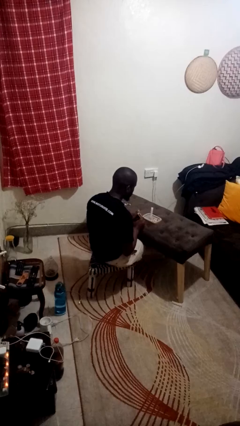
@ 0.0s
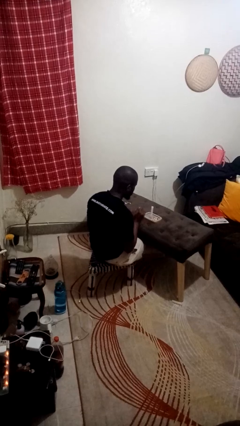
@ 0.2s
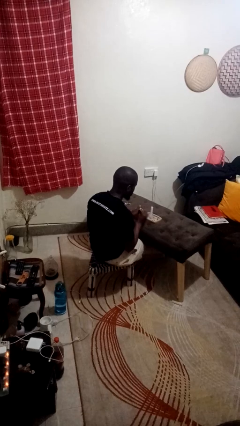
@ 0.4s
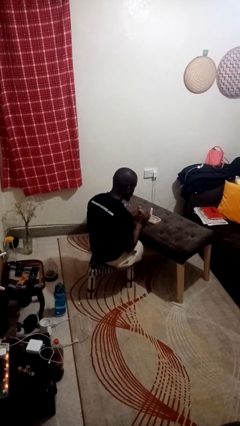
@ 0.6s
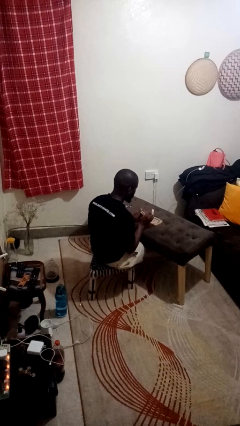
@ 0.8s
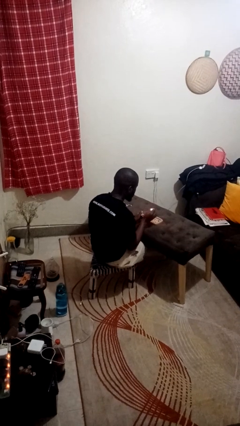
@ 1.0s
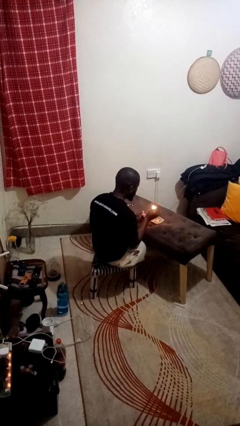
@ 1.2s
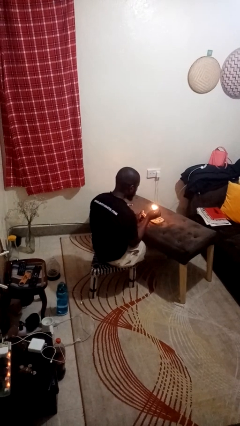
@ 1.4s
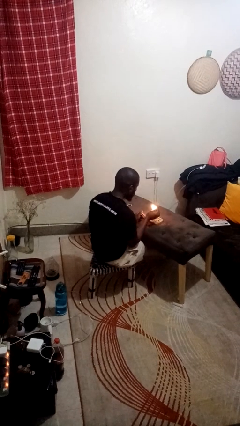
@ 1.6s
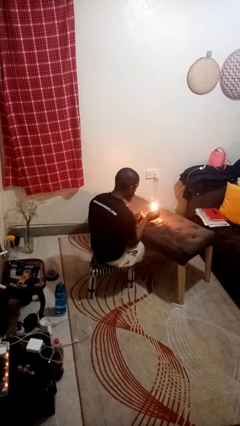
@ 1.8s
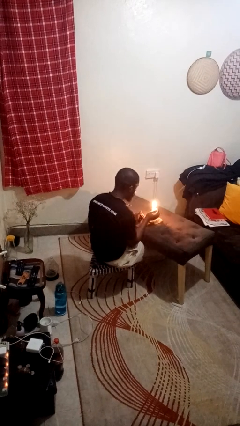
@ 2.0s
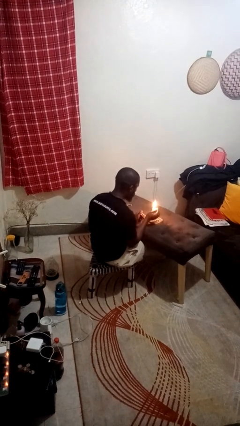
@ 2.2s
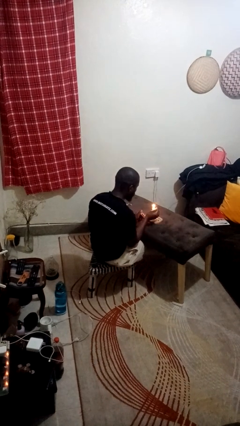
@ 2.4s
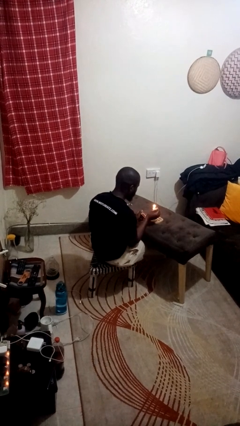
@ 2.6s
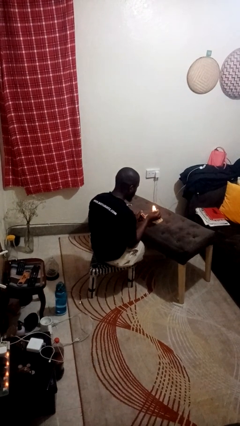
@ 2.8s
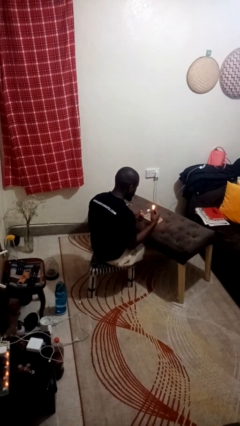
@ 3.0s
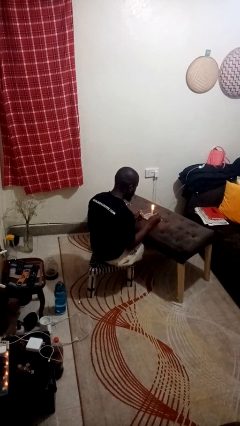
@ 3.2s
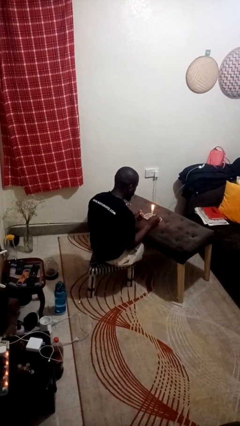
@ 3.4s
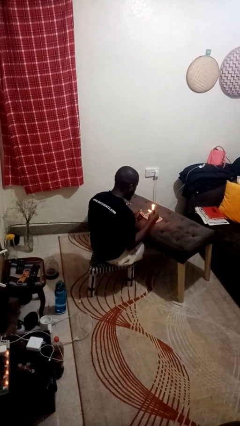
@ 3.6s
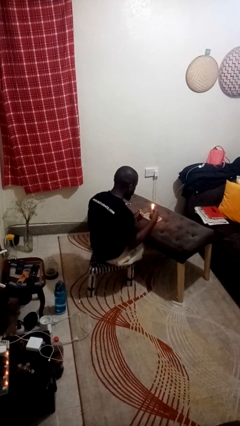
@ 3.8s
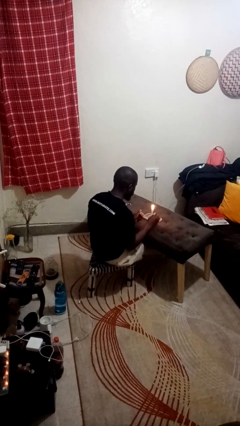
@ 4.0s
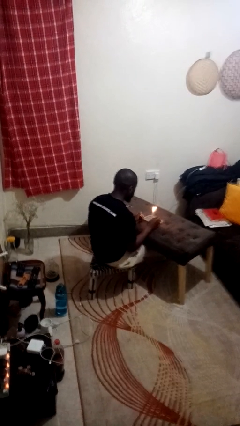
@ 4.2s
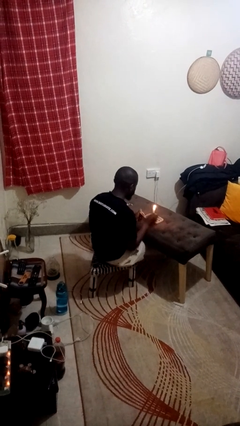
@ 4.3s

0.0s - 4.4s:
person lights candle

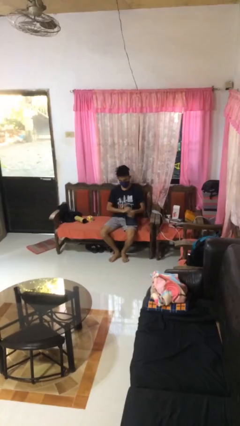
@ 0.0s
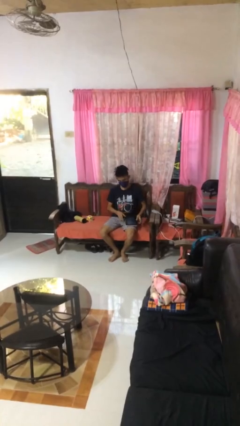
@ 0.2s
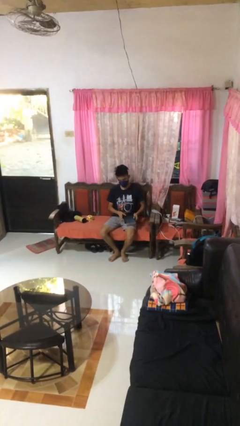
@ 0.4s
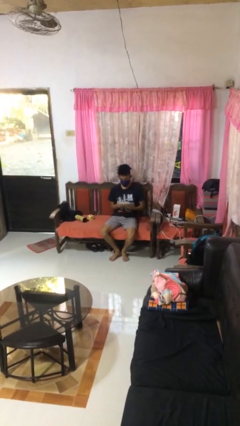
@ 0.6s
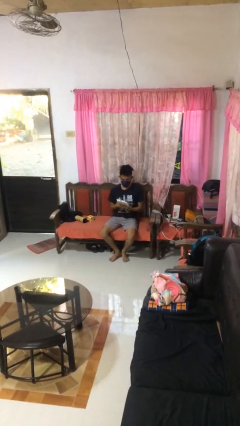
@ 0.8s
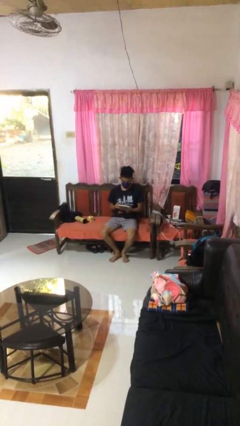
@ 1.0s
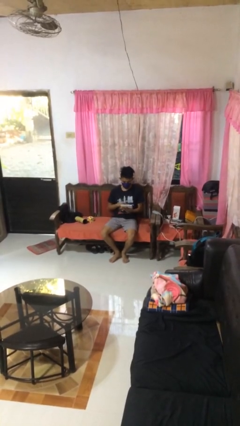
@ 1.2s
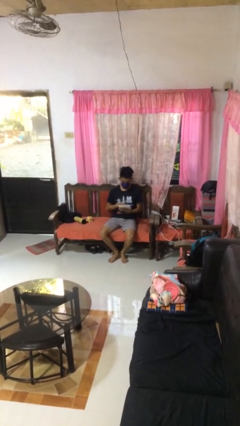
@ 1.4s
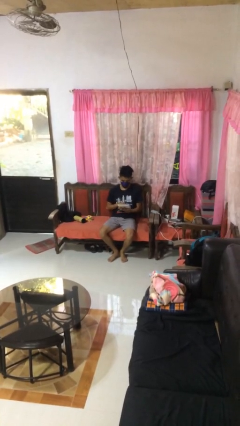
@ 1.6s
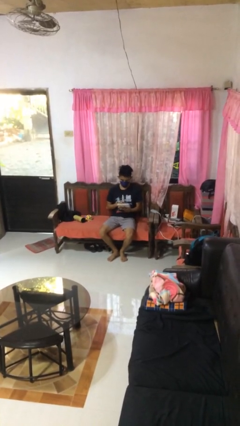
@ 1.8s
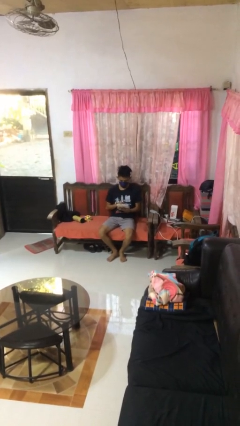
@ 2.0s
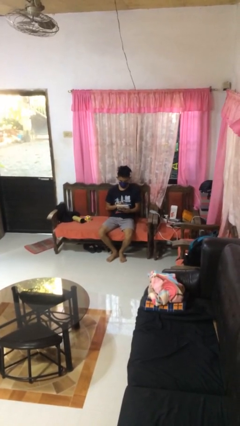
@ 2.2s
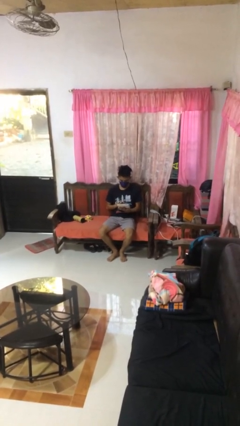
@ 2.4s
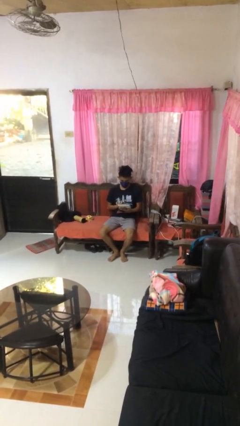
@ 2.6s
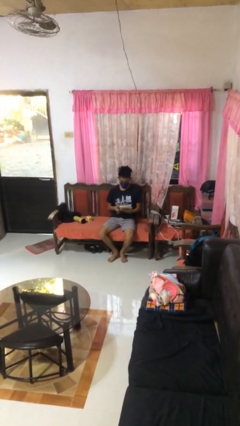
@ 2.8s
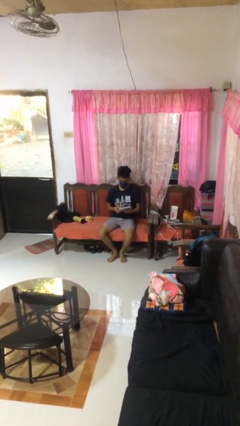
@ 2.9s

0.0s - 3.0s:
person interacts with tablet

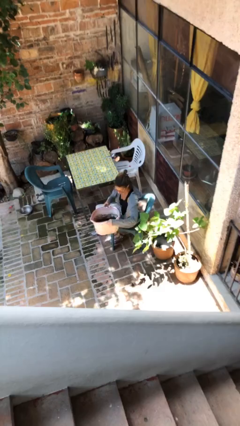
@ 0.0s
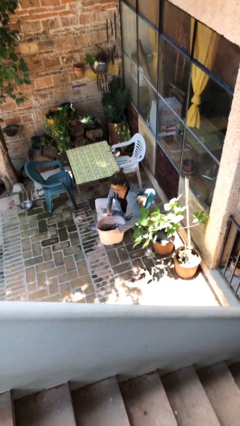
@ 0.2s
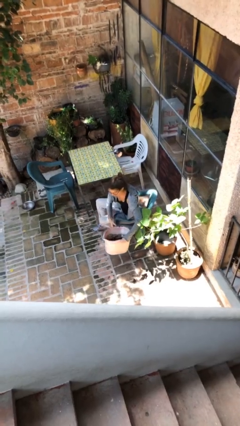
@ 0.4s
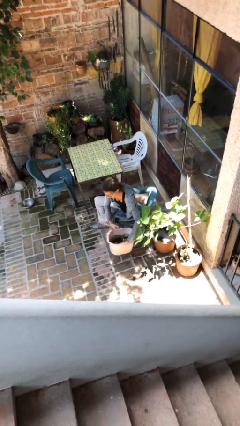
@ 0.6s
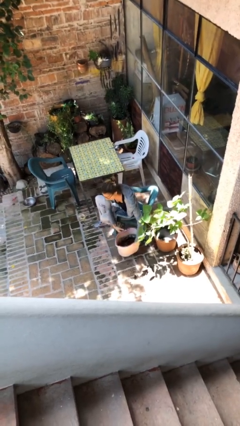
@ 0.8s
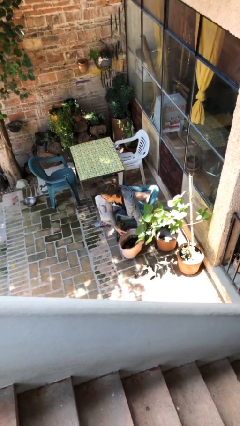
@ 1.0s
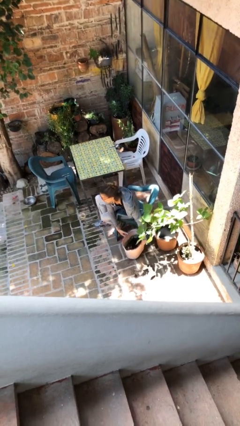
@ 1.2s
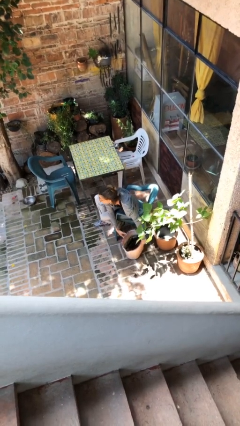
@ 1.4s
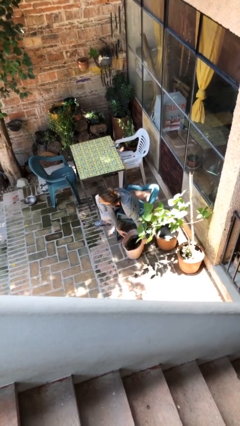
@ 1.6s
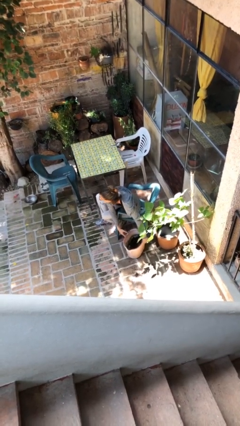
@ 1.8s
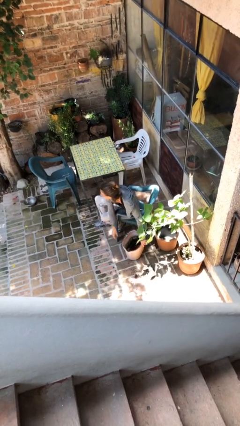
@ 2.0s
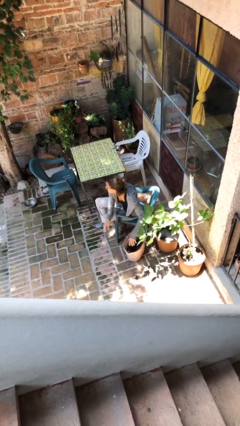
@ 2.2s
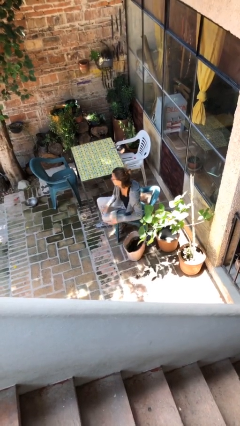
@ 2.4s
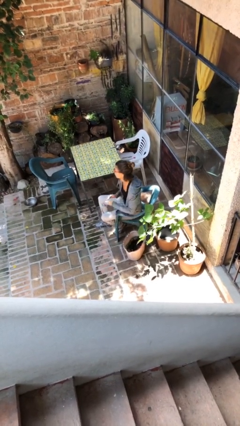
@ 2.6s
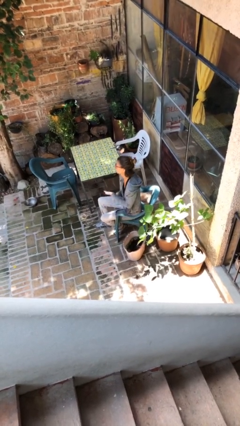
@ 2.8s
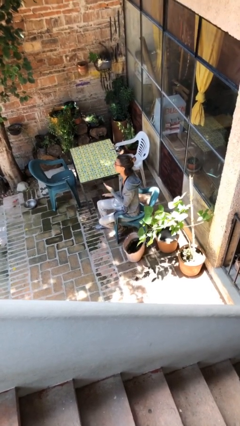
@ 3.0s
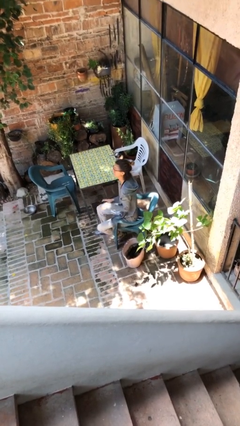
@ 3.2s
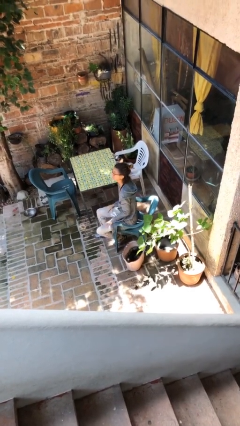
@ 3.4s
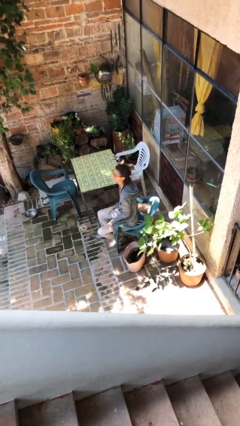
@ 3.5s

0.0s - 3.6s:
person puts down object on floor

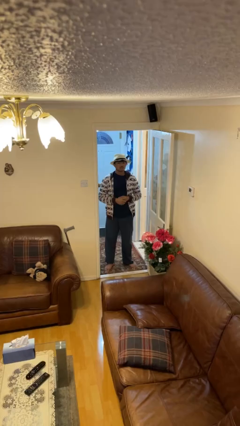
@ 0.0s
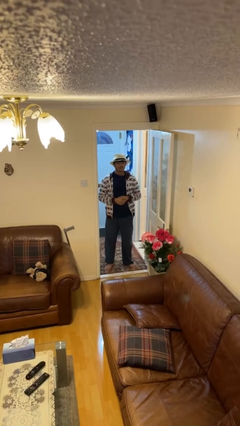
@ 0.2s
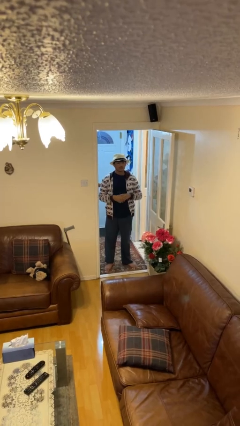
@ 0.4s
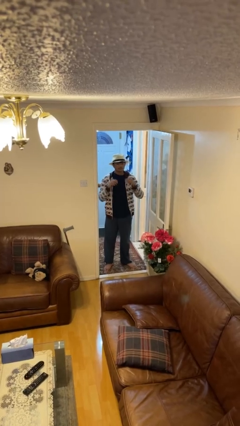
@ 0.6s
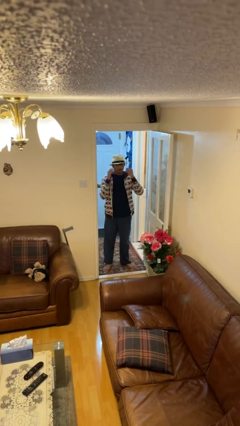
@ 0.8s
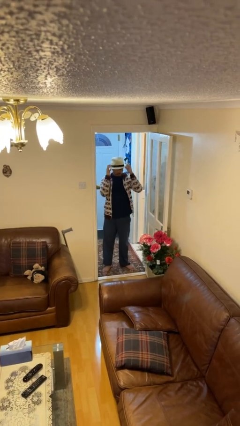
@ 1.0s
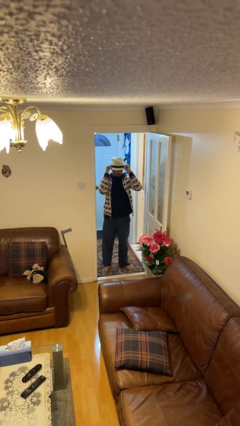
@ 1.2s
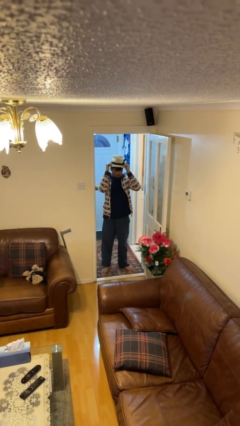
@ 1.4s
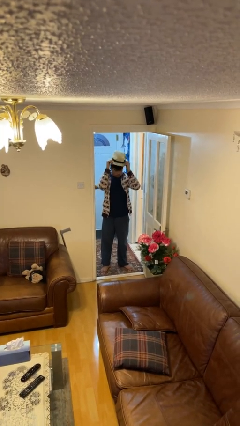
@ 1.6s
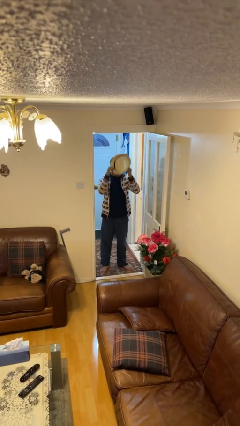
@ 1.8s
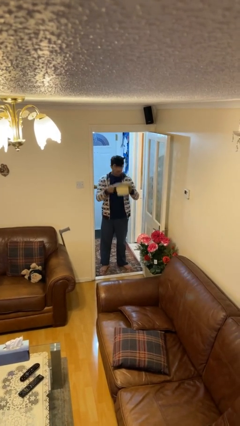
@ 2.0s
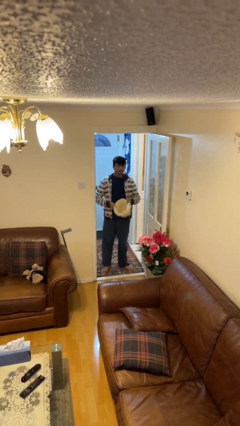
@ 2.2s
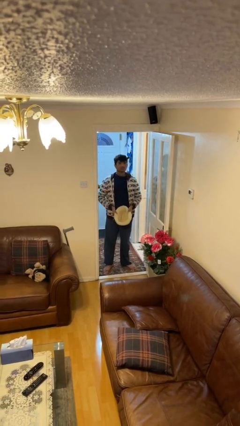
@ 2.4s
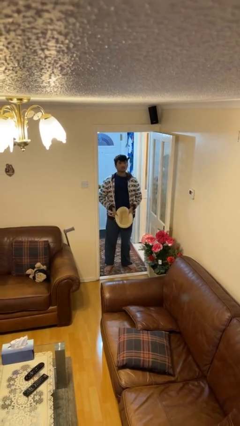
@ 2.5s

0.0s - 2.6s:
person takes off hat

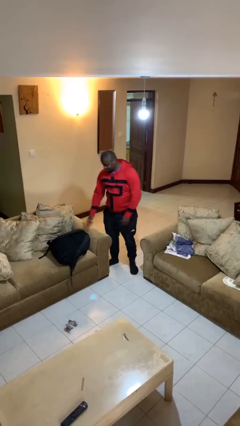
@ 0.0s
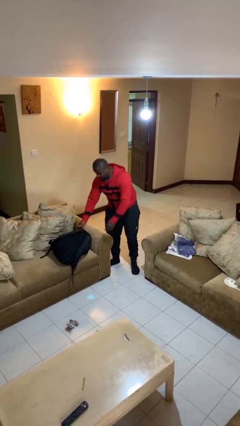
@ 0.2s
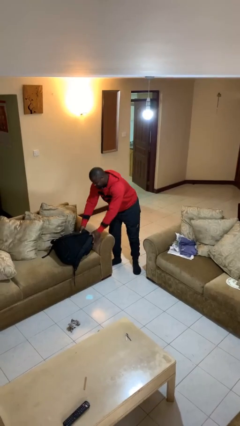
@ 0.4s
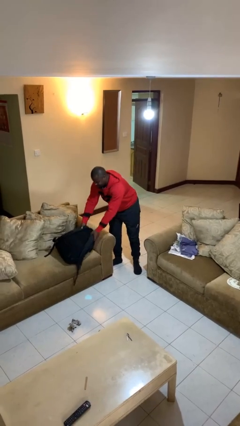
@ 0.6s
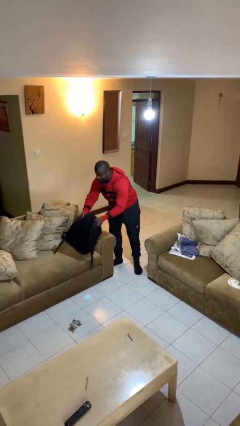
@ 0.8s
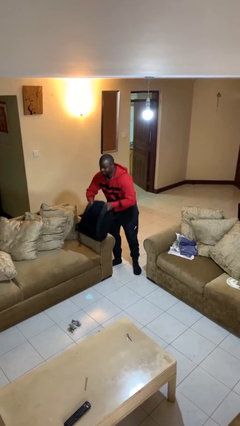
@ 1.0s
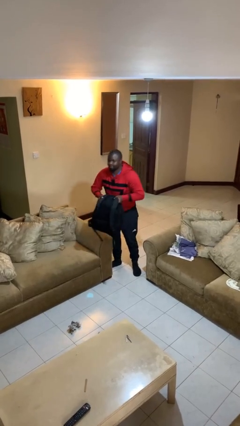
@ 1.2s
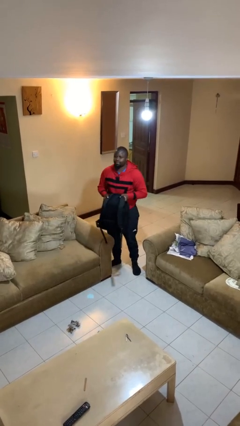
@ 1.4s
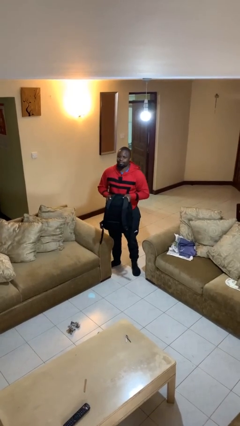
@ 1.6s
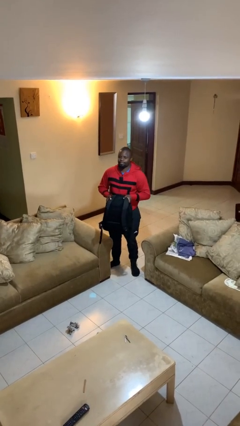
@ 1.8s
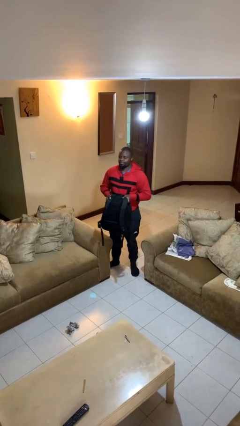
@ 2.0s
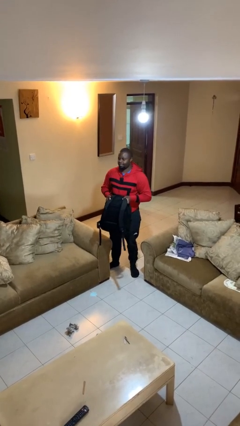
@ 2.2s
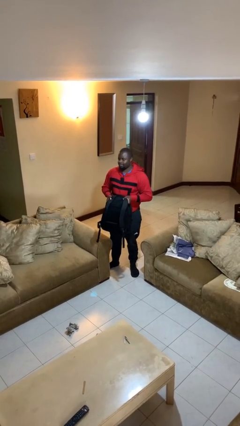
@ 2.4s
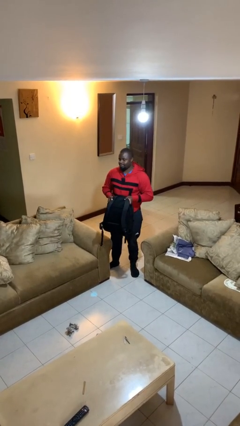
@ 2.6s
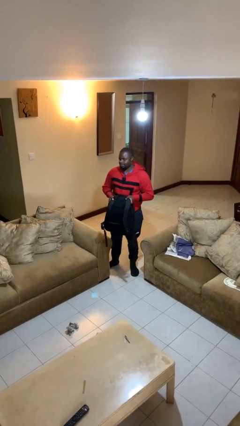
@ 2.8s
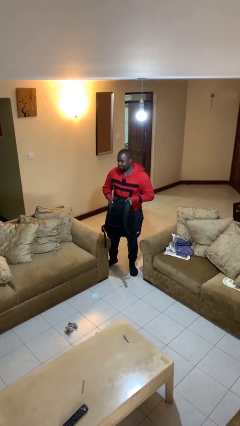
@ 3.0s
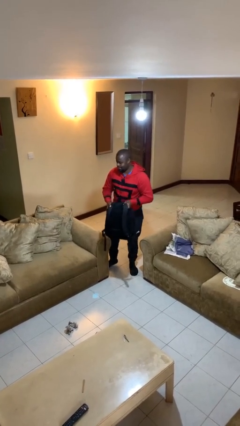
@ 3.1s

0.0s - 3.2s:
person picks up object from couch

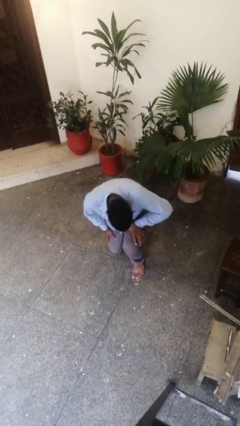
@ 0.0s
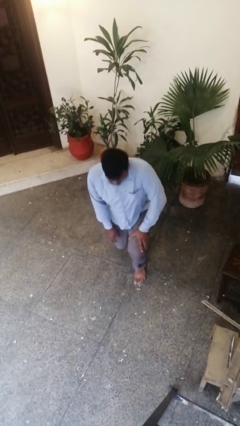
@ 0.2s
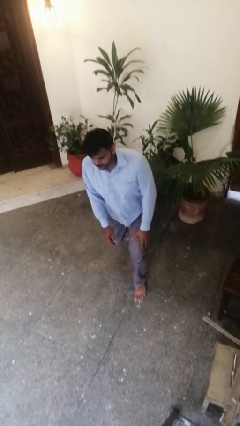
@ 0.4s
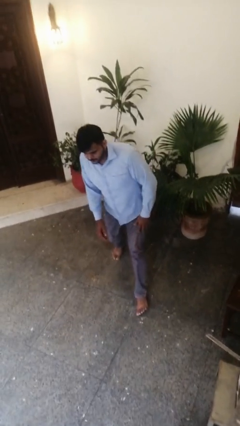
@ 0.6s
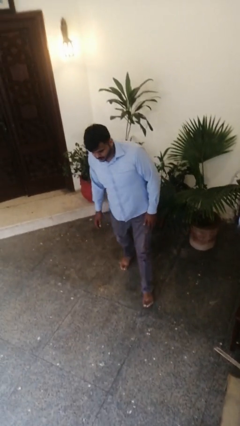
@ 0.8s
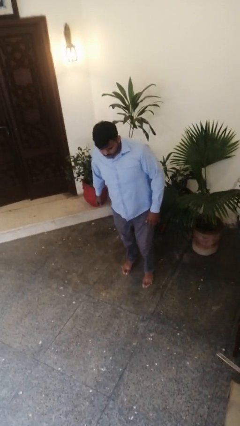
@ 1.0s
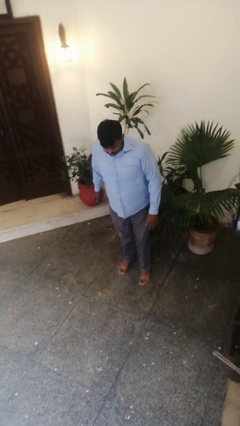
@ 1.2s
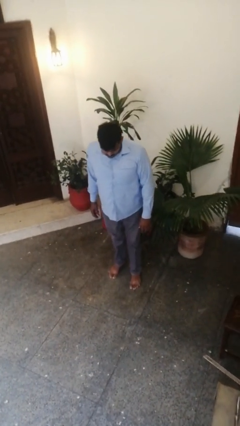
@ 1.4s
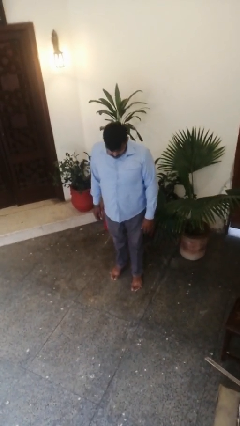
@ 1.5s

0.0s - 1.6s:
person stands up from floor
